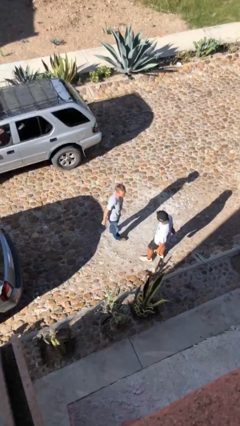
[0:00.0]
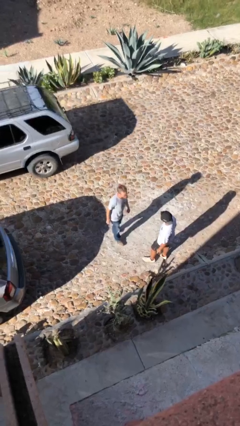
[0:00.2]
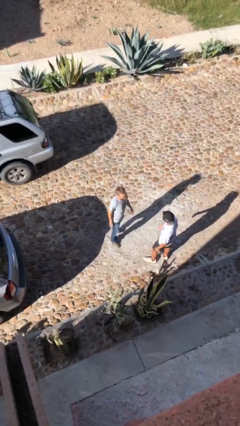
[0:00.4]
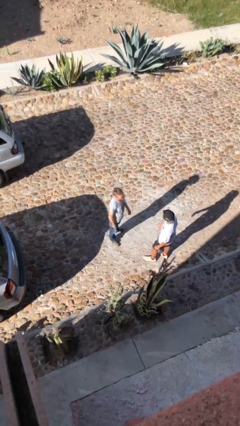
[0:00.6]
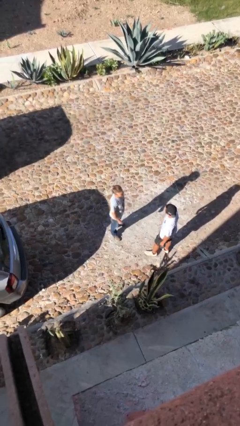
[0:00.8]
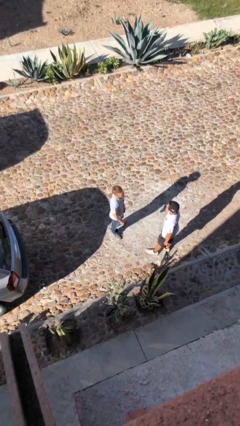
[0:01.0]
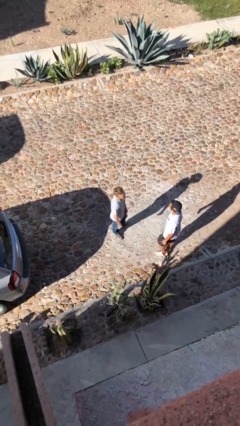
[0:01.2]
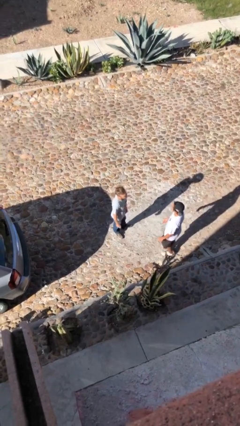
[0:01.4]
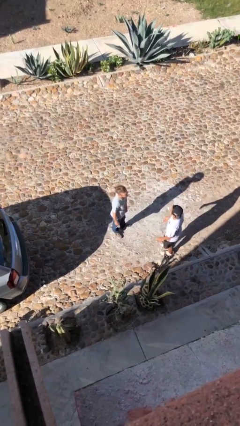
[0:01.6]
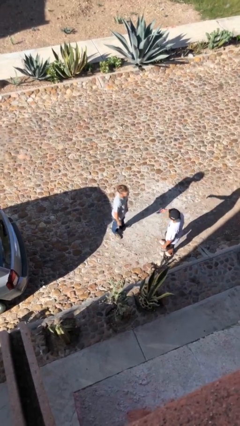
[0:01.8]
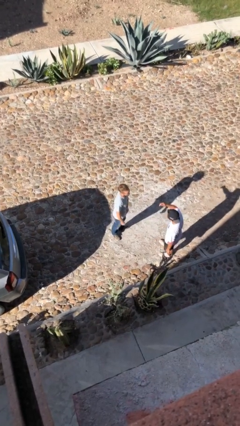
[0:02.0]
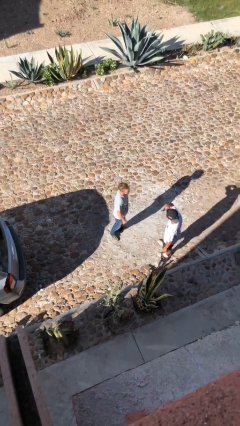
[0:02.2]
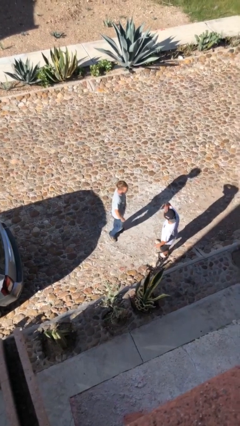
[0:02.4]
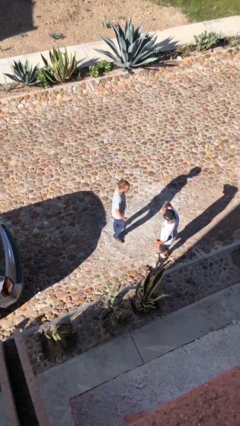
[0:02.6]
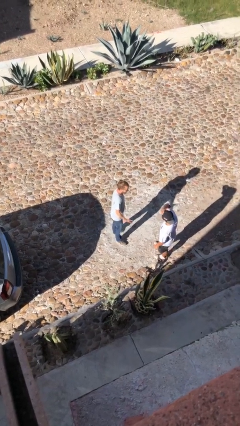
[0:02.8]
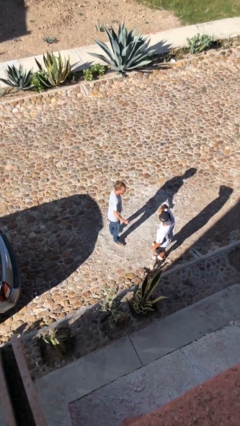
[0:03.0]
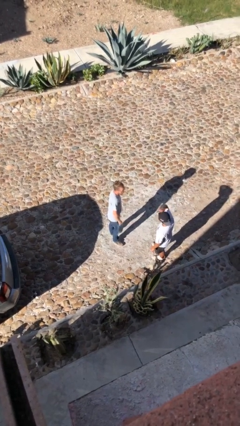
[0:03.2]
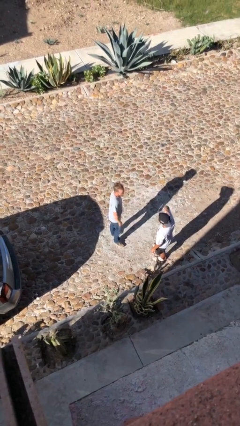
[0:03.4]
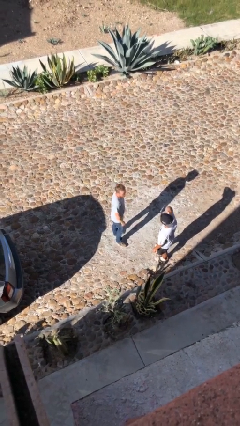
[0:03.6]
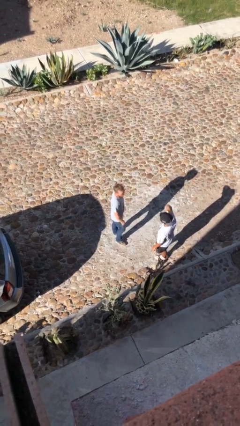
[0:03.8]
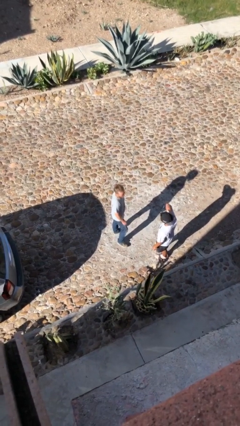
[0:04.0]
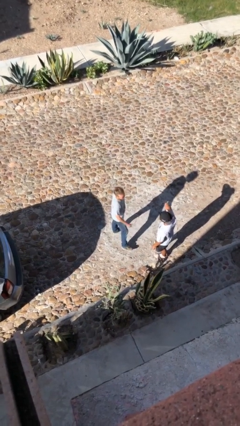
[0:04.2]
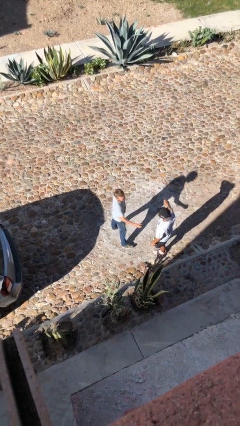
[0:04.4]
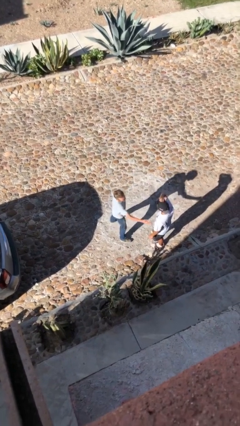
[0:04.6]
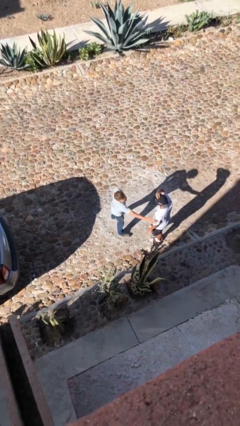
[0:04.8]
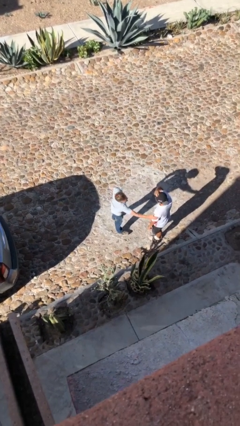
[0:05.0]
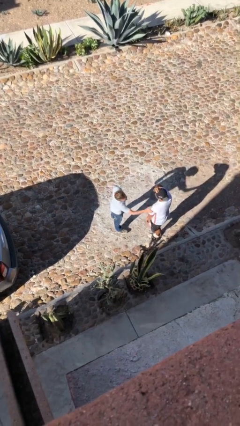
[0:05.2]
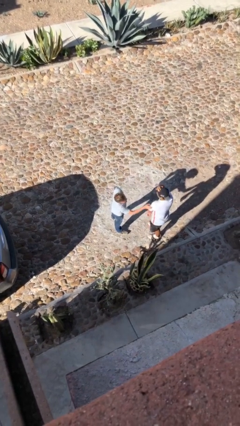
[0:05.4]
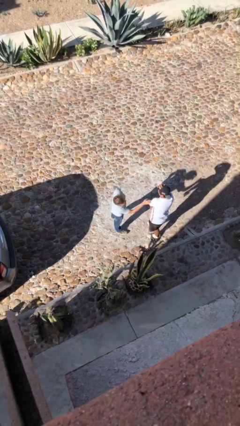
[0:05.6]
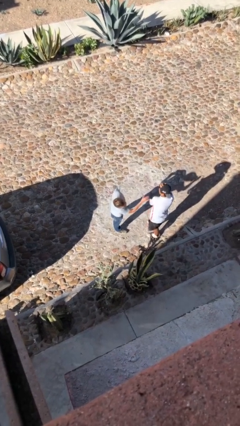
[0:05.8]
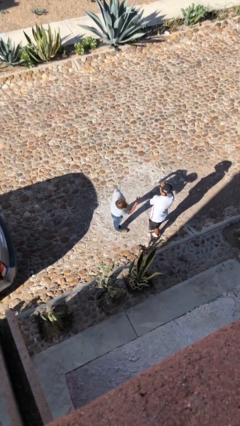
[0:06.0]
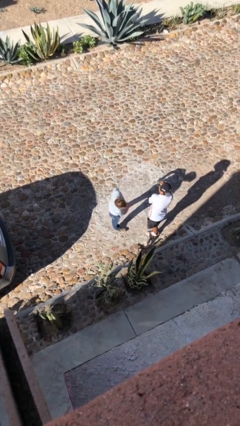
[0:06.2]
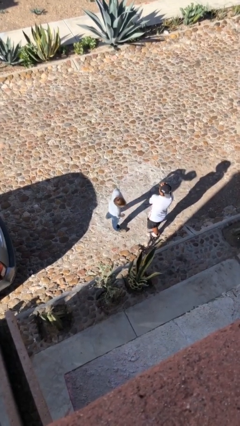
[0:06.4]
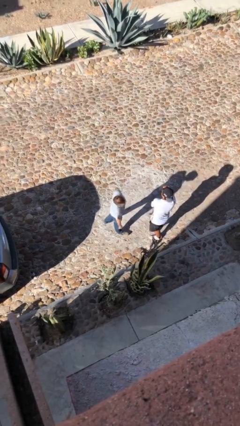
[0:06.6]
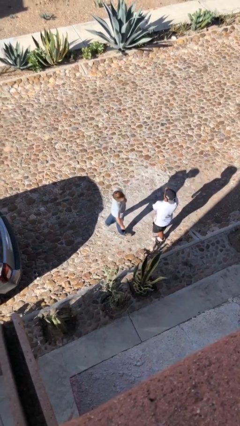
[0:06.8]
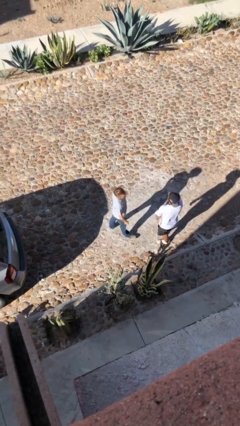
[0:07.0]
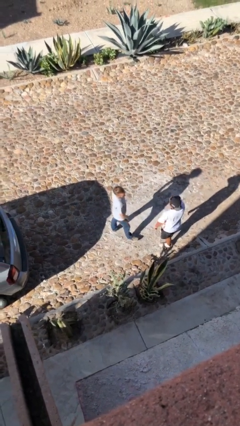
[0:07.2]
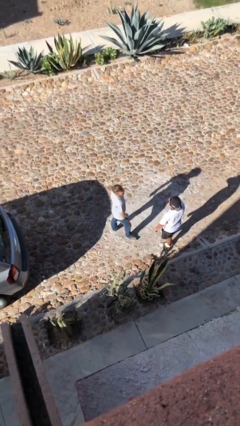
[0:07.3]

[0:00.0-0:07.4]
person talks to person

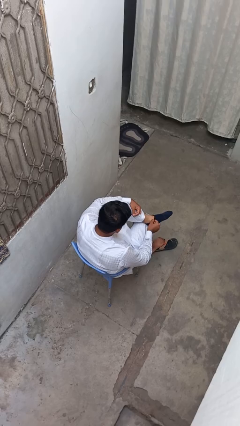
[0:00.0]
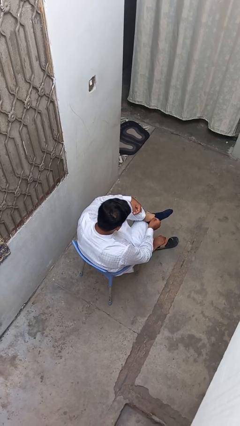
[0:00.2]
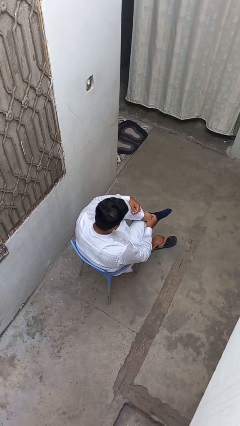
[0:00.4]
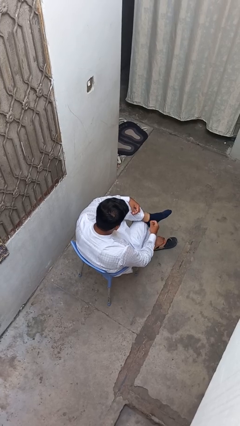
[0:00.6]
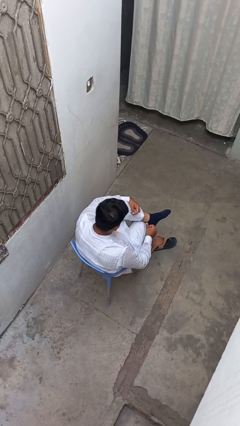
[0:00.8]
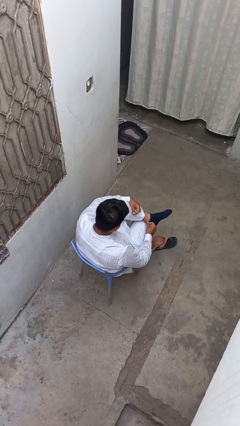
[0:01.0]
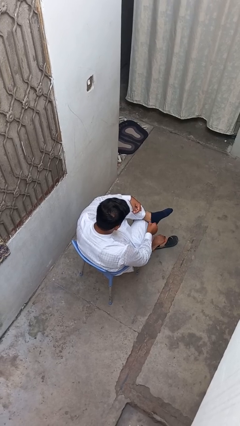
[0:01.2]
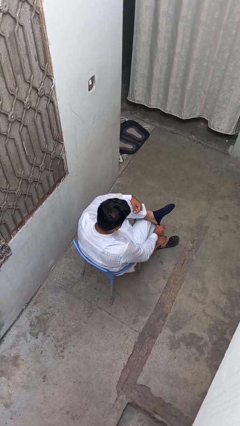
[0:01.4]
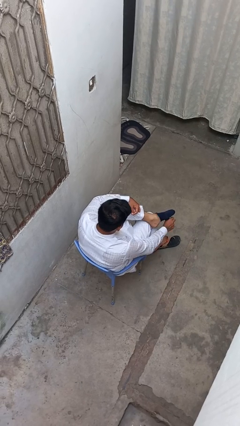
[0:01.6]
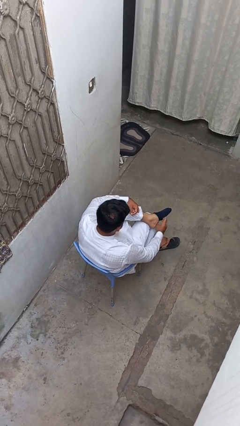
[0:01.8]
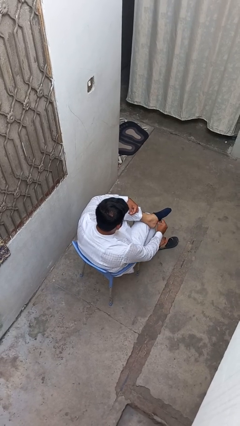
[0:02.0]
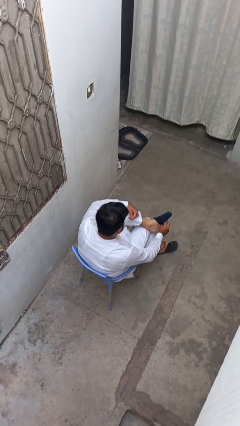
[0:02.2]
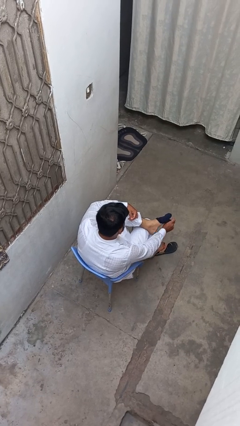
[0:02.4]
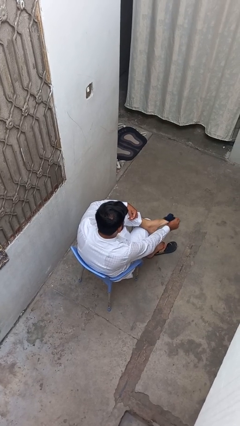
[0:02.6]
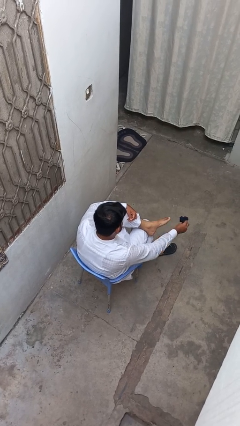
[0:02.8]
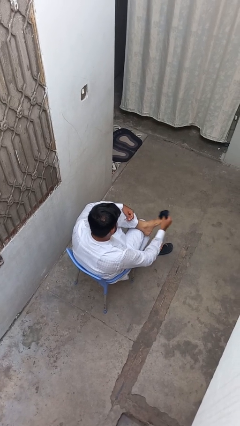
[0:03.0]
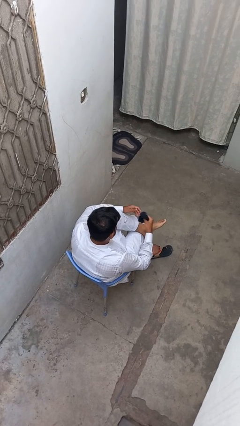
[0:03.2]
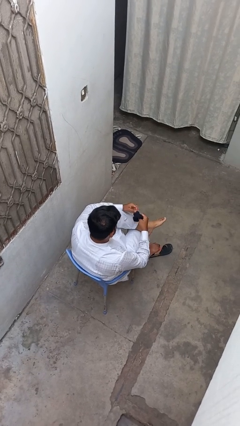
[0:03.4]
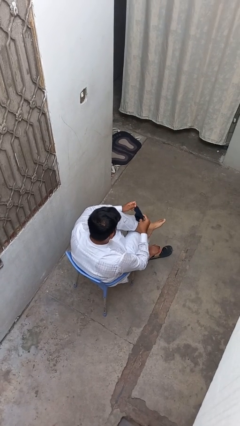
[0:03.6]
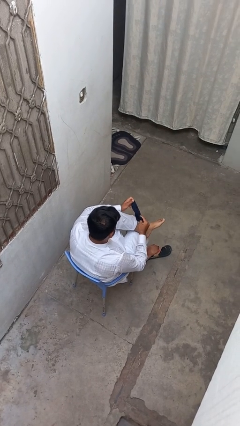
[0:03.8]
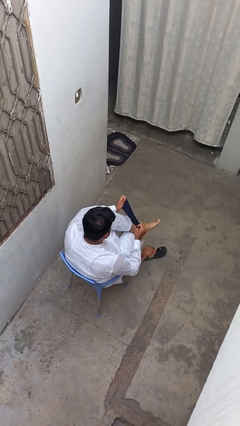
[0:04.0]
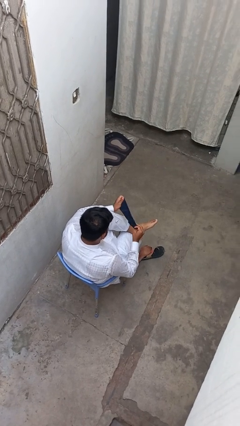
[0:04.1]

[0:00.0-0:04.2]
person takes off socks

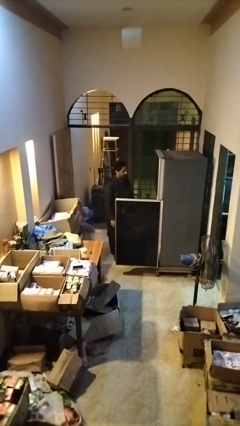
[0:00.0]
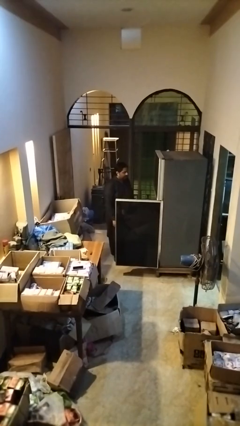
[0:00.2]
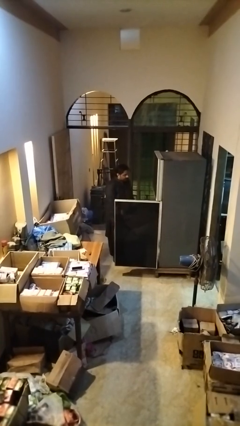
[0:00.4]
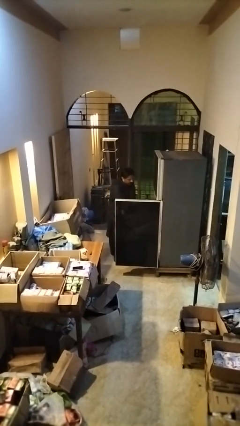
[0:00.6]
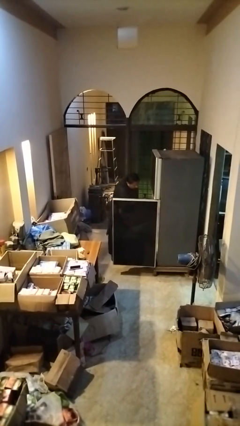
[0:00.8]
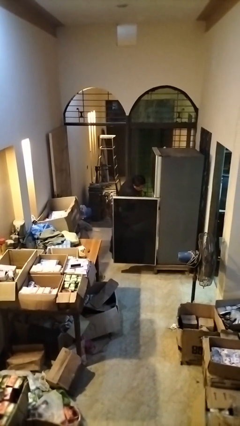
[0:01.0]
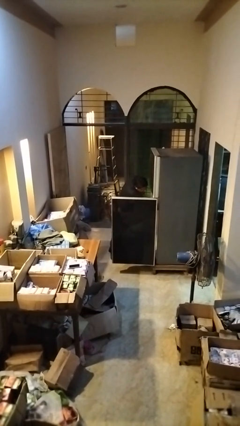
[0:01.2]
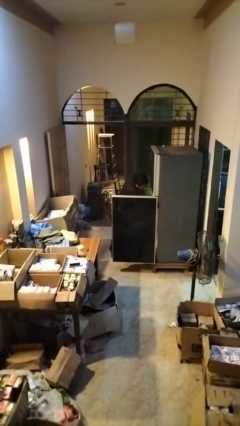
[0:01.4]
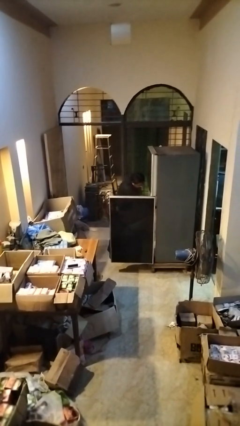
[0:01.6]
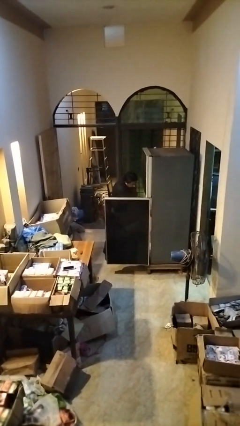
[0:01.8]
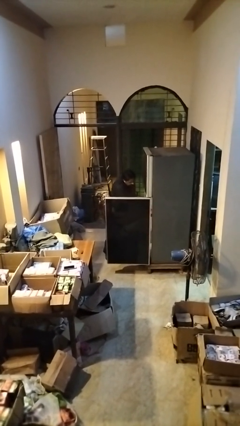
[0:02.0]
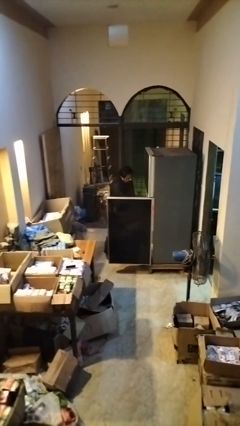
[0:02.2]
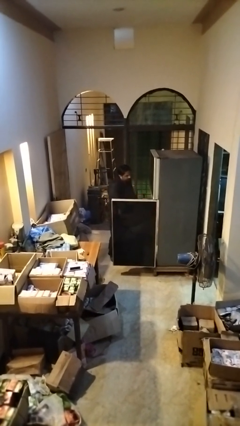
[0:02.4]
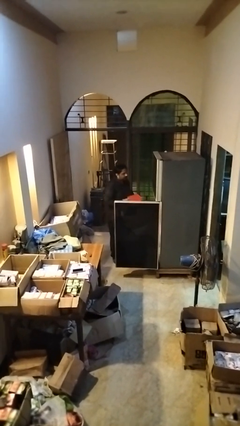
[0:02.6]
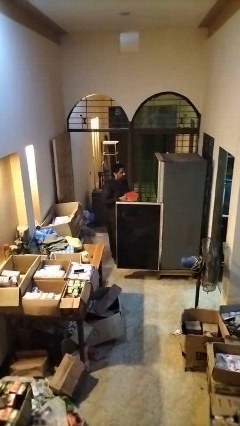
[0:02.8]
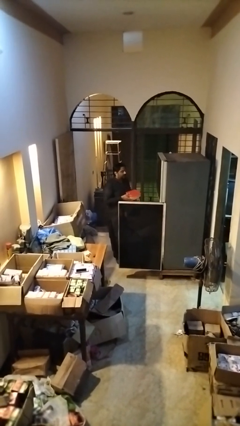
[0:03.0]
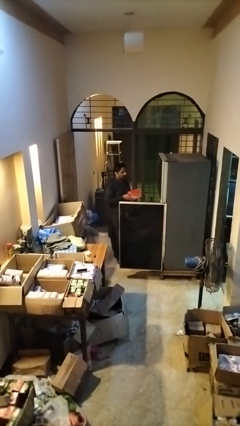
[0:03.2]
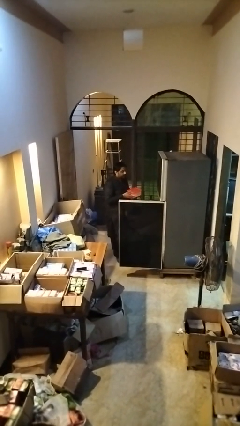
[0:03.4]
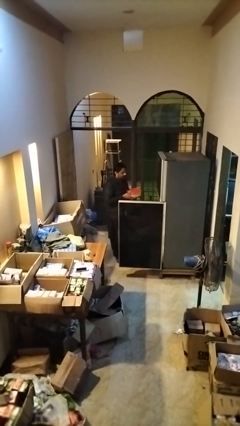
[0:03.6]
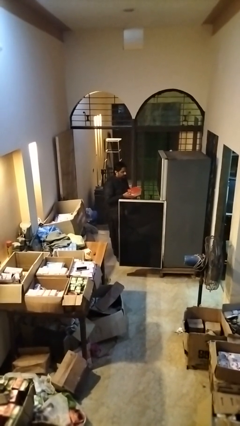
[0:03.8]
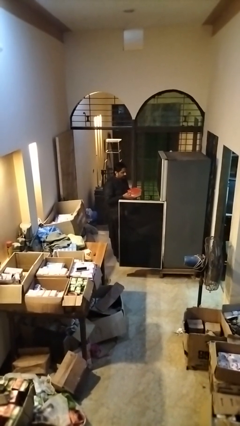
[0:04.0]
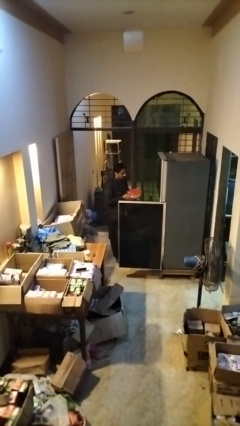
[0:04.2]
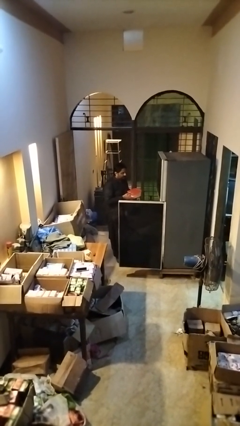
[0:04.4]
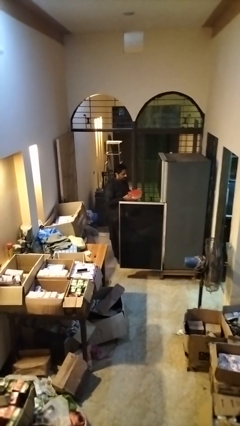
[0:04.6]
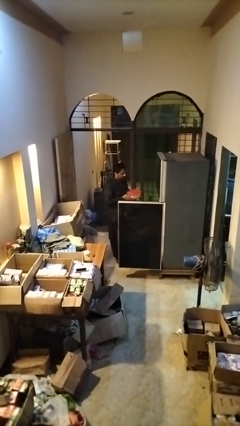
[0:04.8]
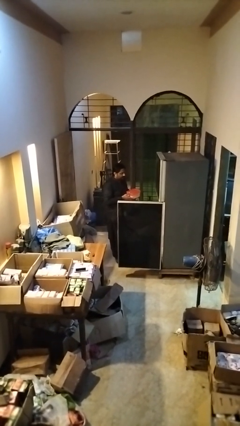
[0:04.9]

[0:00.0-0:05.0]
person puts object into refrigerator

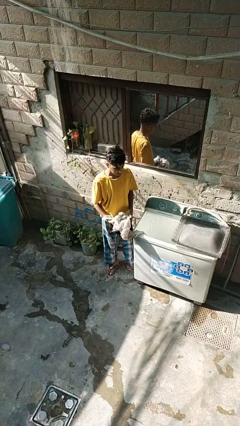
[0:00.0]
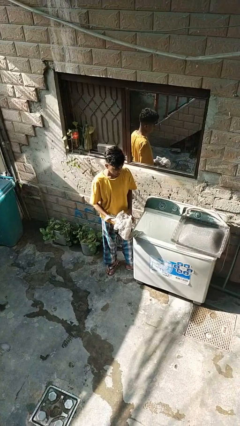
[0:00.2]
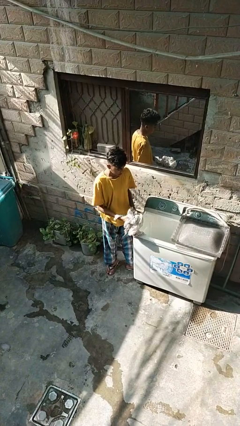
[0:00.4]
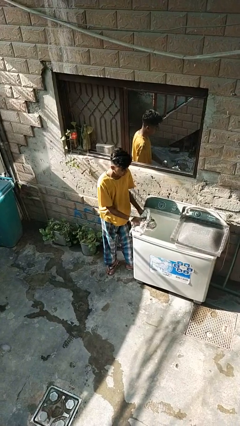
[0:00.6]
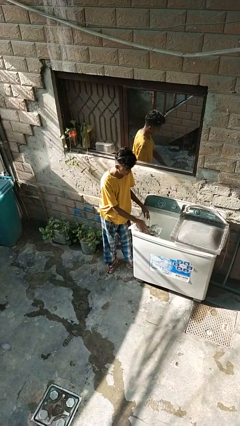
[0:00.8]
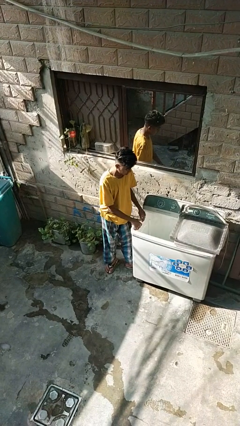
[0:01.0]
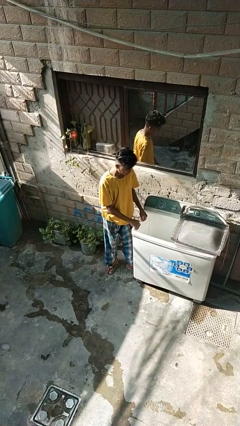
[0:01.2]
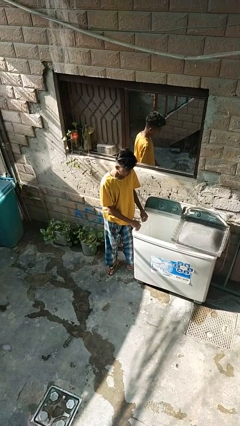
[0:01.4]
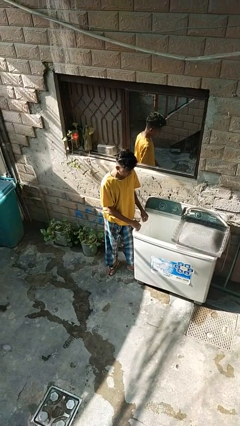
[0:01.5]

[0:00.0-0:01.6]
person loads clotheswasher

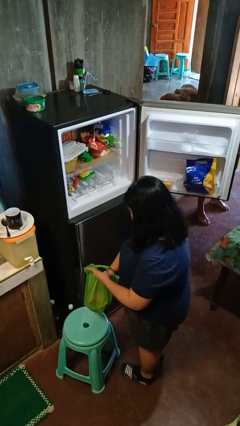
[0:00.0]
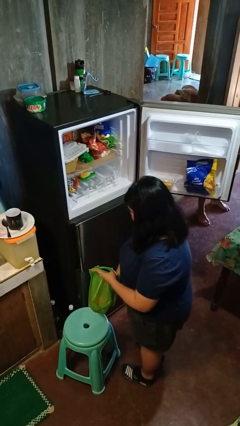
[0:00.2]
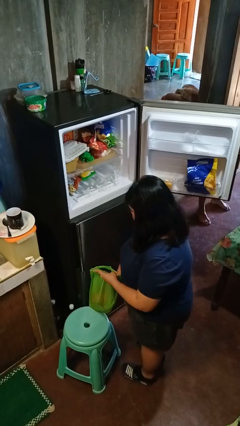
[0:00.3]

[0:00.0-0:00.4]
person loads groceries into refrigerator
